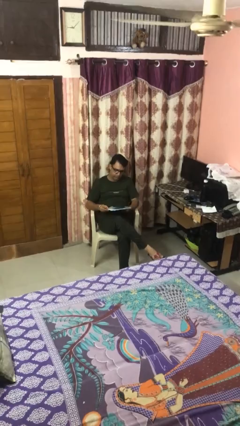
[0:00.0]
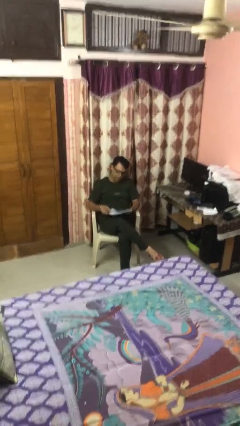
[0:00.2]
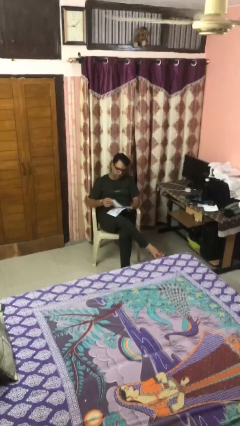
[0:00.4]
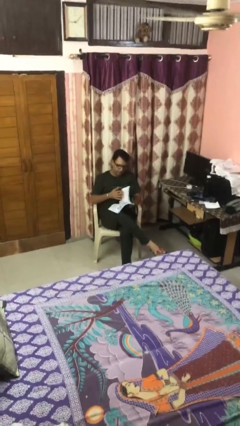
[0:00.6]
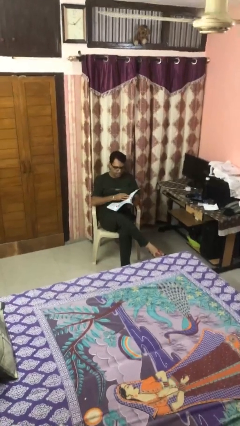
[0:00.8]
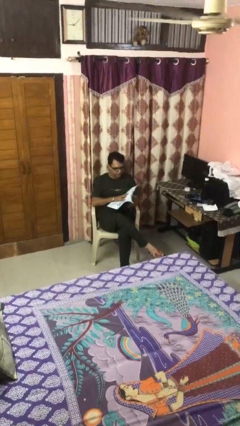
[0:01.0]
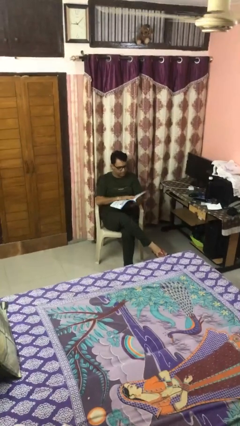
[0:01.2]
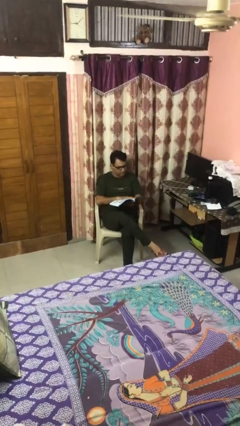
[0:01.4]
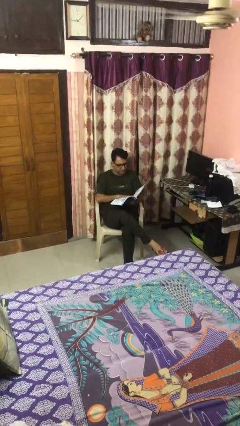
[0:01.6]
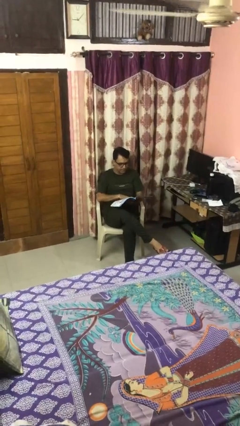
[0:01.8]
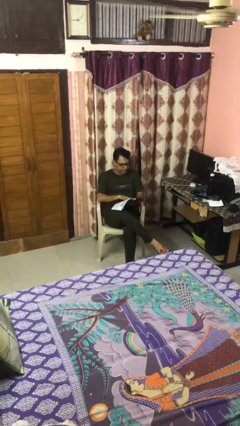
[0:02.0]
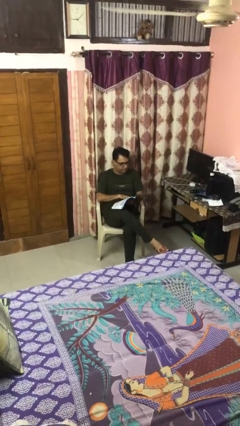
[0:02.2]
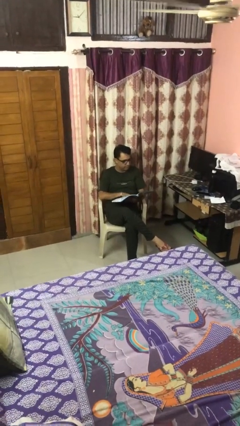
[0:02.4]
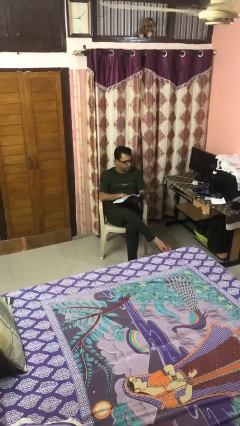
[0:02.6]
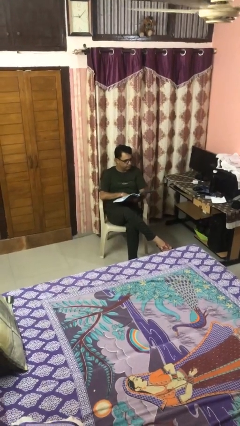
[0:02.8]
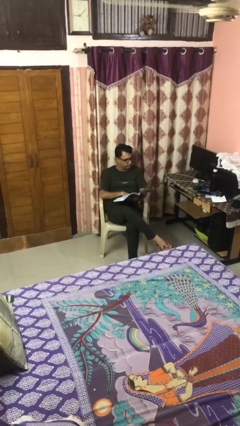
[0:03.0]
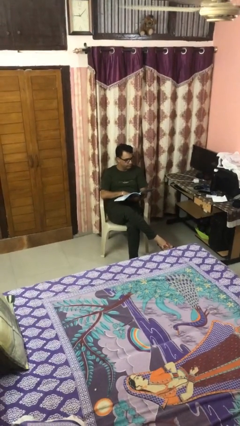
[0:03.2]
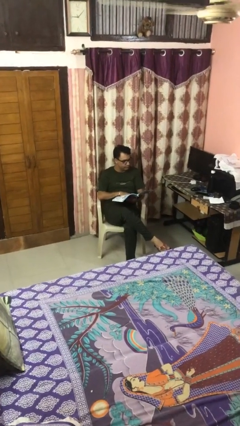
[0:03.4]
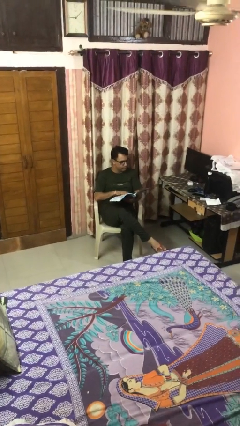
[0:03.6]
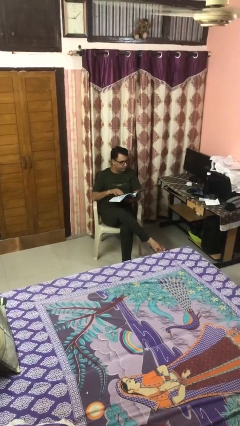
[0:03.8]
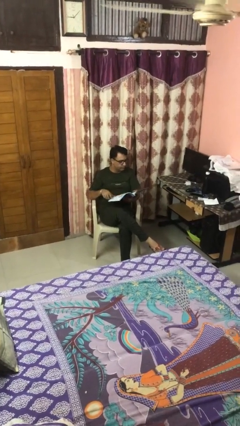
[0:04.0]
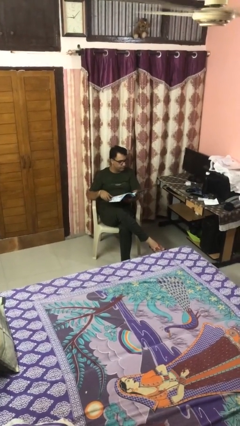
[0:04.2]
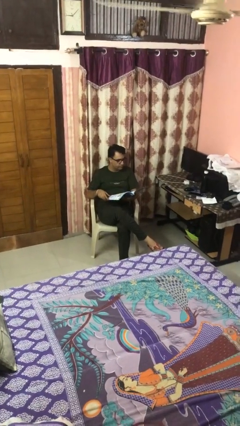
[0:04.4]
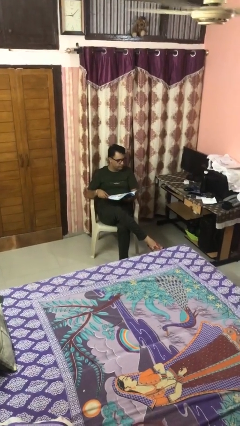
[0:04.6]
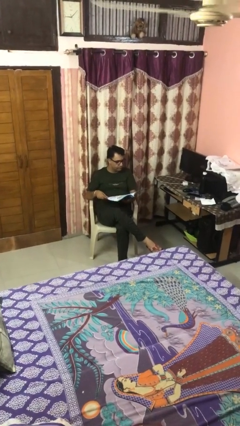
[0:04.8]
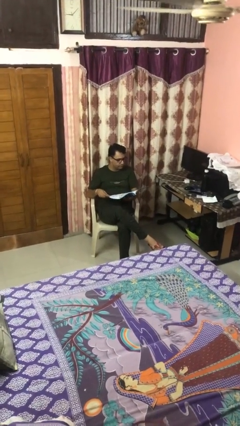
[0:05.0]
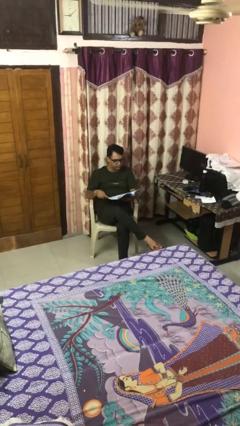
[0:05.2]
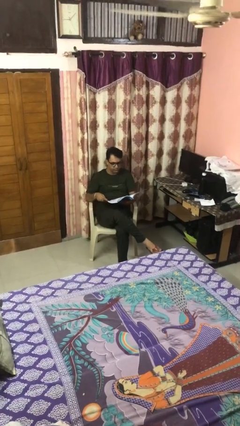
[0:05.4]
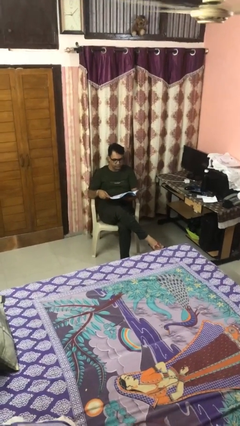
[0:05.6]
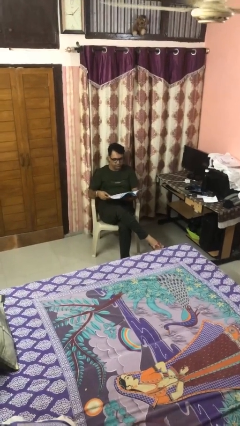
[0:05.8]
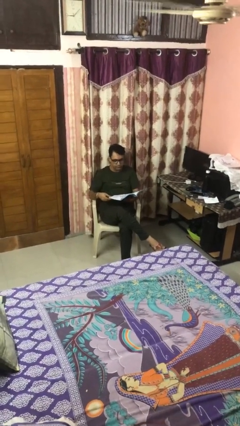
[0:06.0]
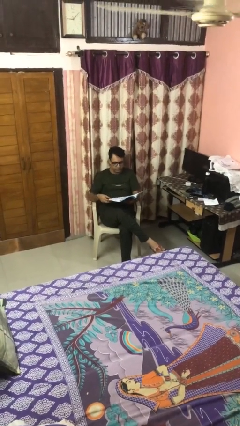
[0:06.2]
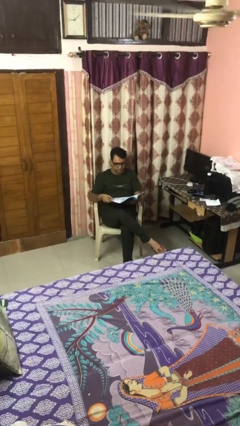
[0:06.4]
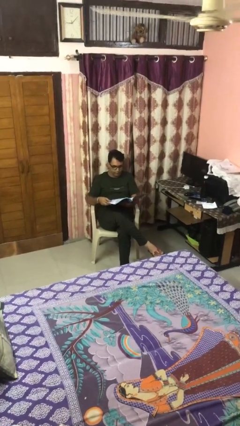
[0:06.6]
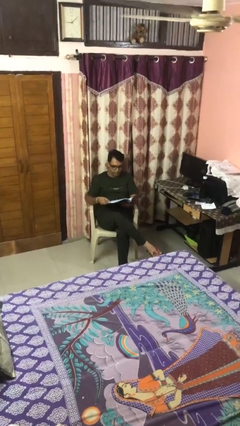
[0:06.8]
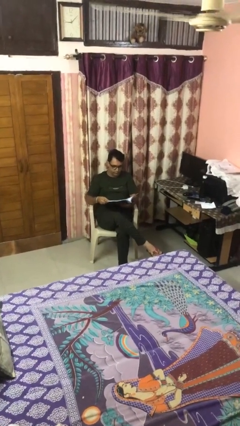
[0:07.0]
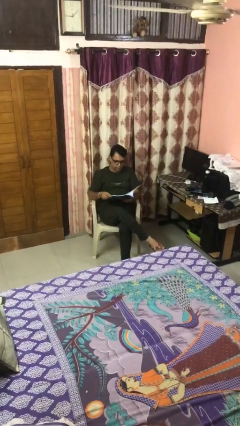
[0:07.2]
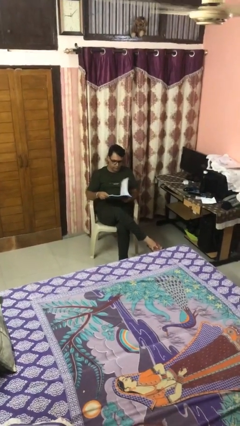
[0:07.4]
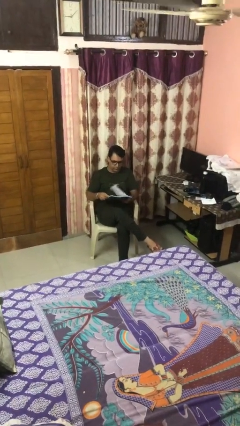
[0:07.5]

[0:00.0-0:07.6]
person reads book

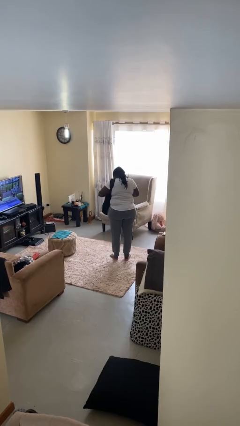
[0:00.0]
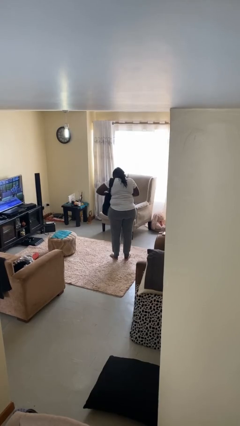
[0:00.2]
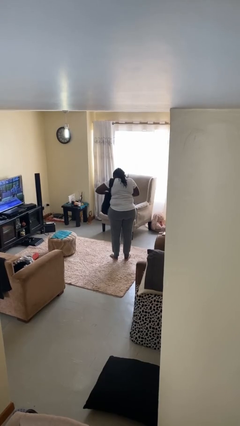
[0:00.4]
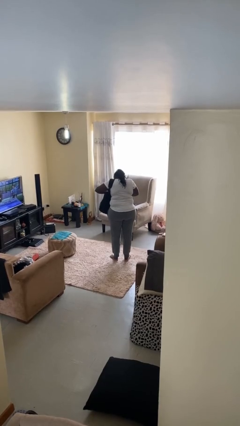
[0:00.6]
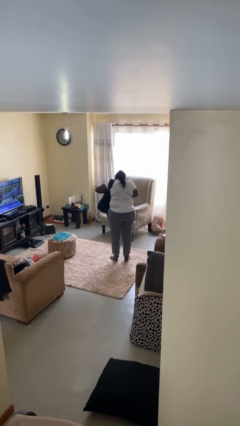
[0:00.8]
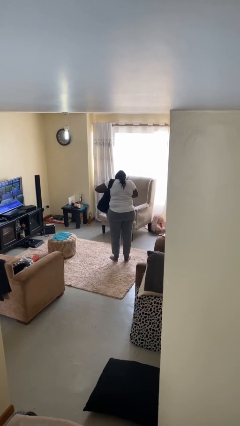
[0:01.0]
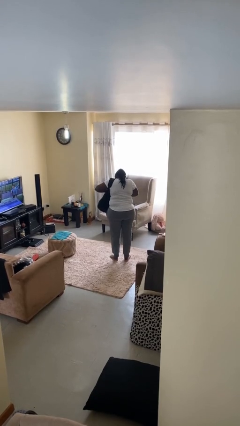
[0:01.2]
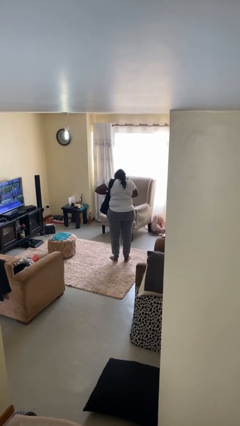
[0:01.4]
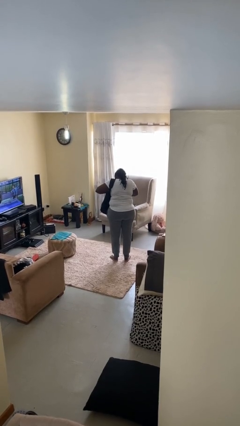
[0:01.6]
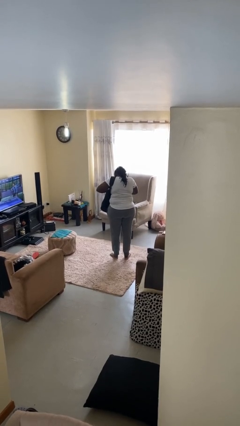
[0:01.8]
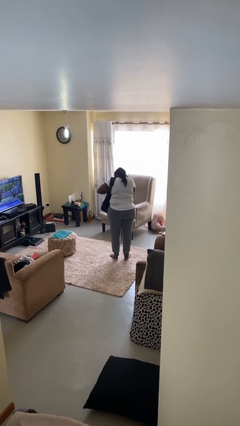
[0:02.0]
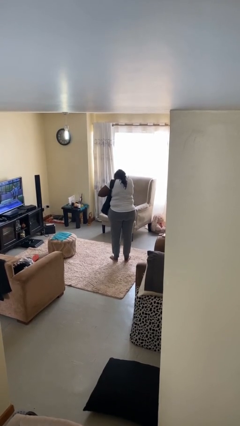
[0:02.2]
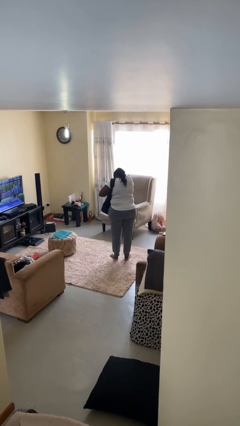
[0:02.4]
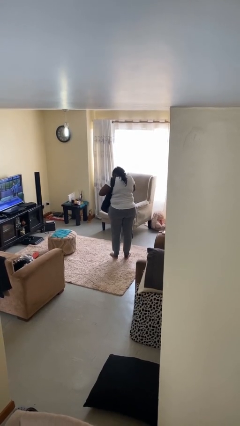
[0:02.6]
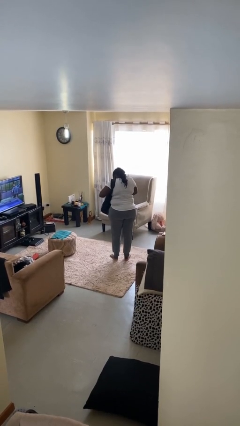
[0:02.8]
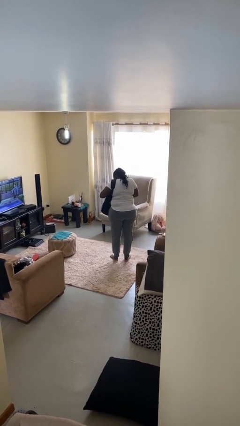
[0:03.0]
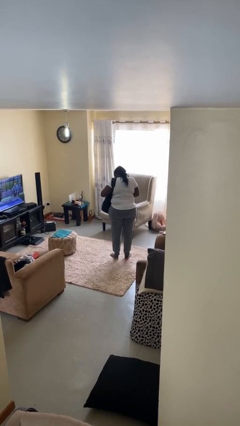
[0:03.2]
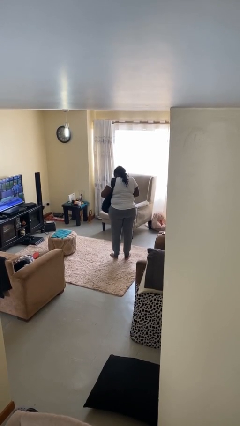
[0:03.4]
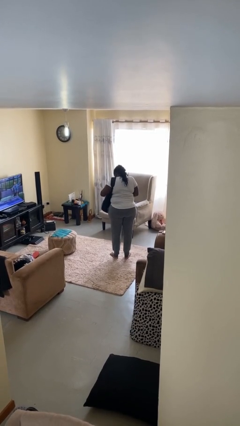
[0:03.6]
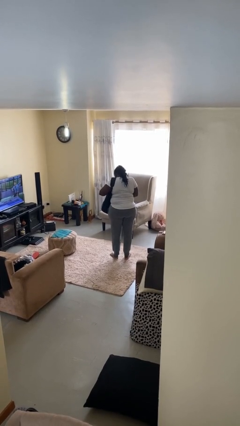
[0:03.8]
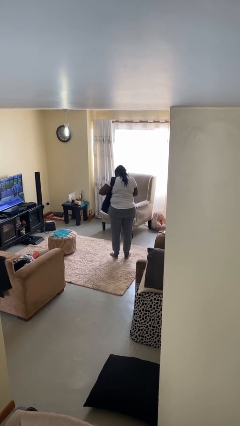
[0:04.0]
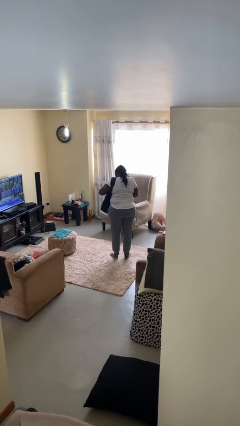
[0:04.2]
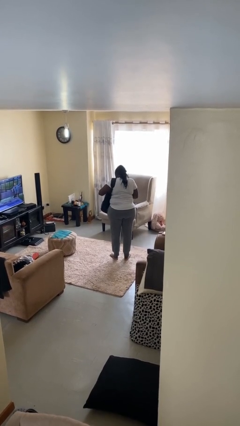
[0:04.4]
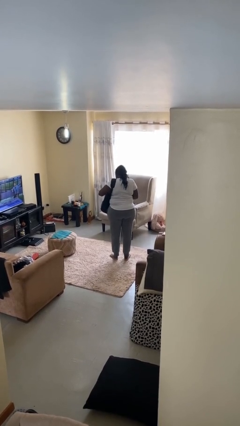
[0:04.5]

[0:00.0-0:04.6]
person searches in backpack

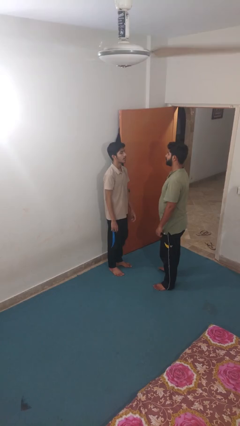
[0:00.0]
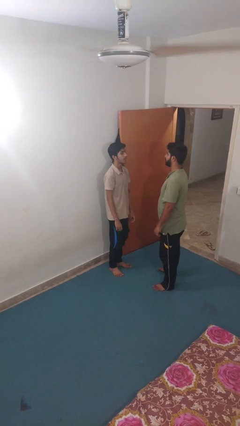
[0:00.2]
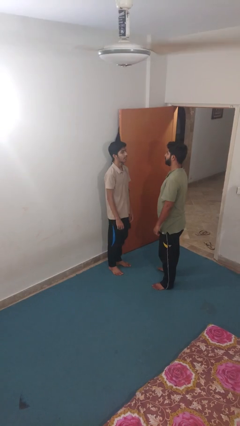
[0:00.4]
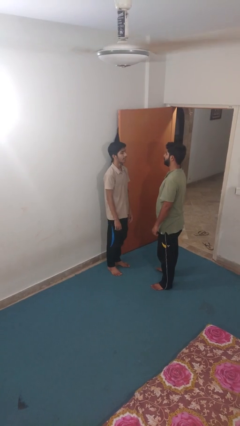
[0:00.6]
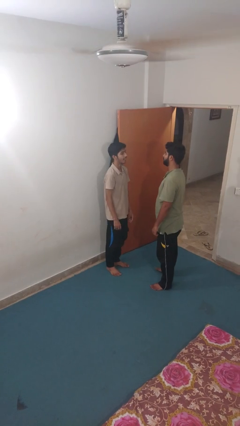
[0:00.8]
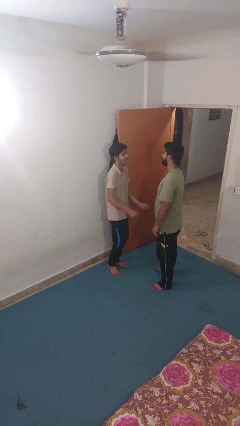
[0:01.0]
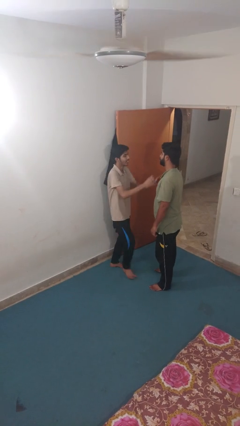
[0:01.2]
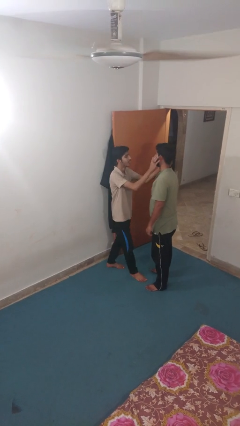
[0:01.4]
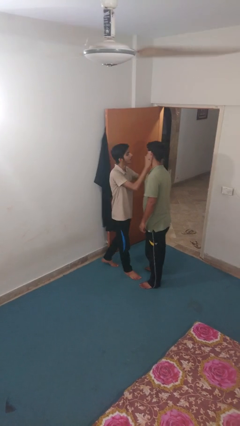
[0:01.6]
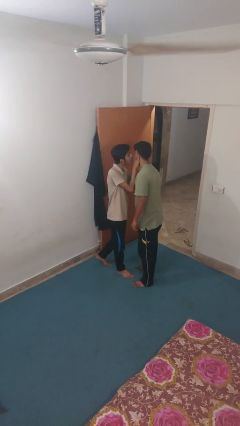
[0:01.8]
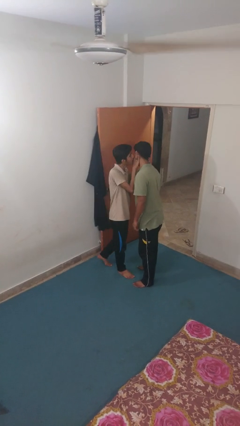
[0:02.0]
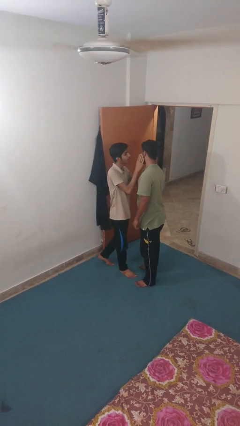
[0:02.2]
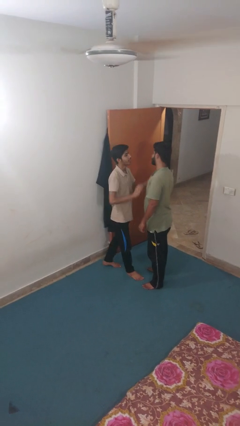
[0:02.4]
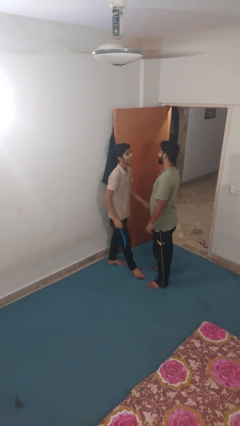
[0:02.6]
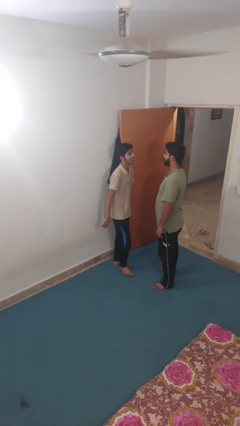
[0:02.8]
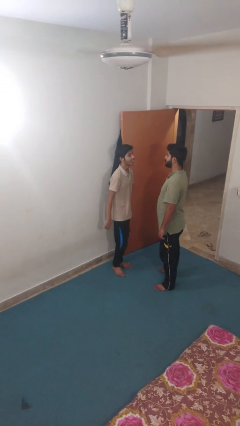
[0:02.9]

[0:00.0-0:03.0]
person kisses cheek of person

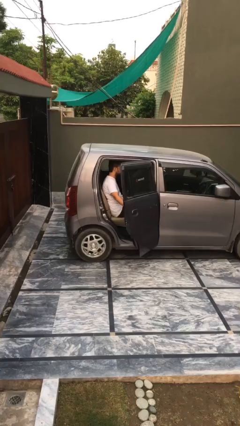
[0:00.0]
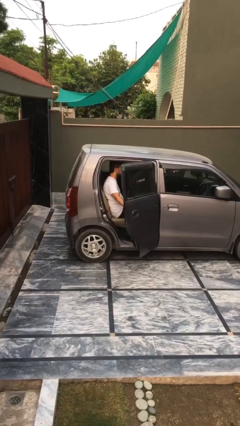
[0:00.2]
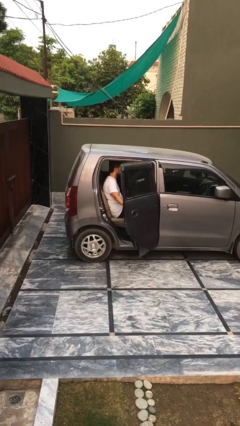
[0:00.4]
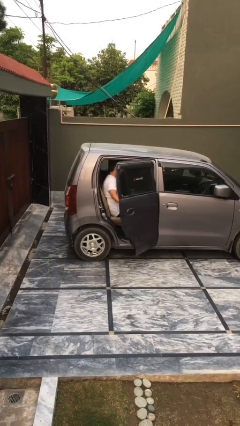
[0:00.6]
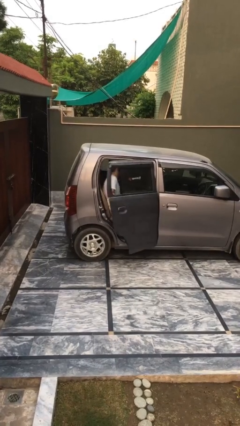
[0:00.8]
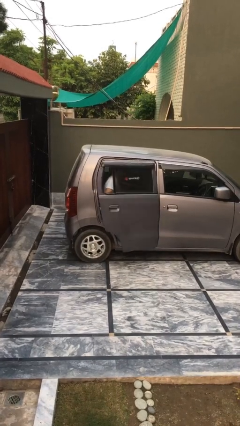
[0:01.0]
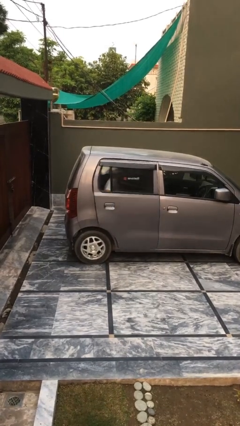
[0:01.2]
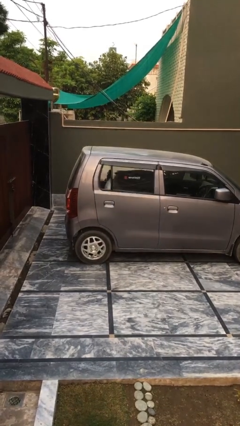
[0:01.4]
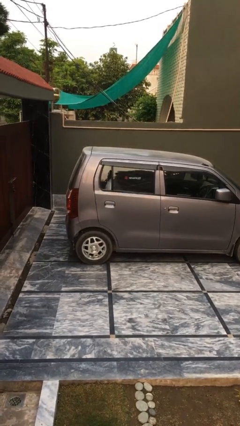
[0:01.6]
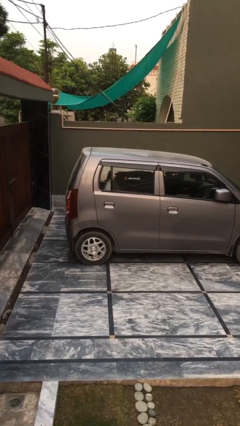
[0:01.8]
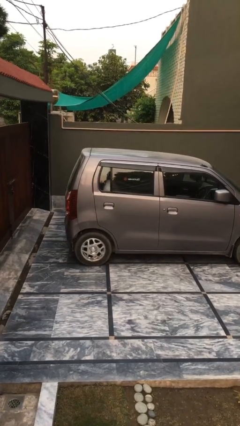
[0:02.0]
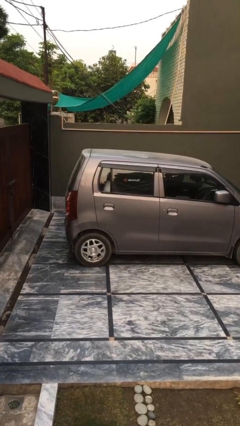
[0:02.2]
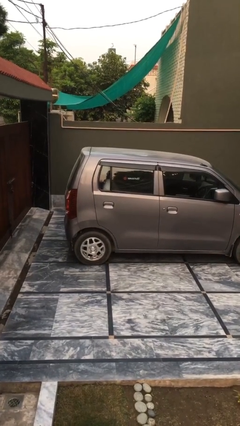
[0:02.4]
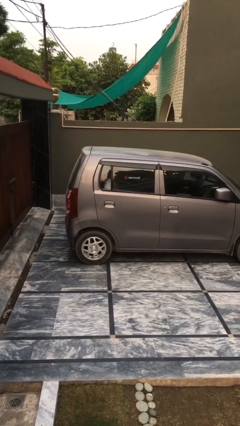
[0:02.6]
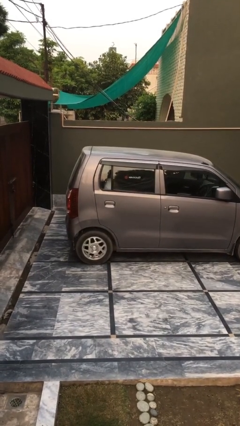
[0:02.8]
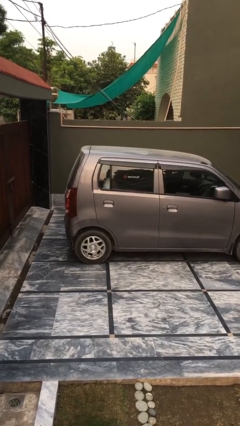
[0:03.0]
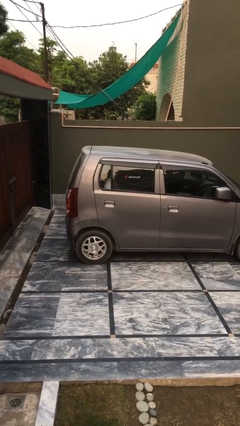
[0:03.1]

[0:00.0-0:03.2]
person closes car door
